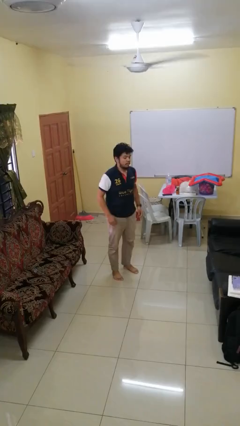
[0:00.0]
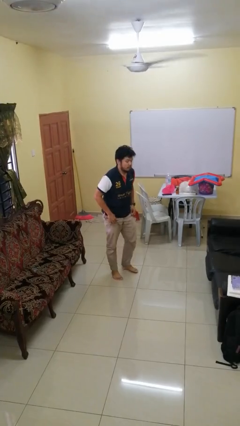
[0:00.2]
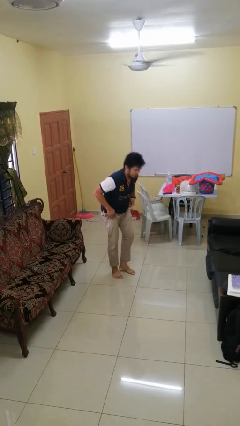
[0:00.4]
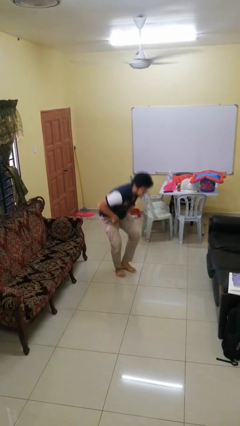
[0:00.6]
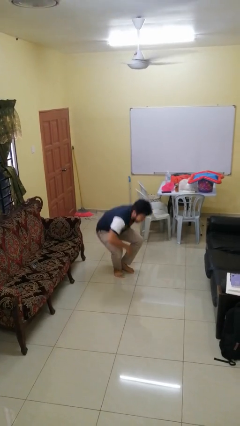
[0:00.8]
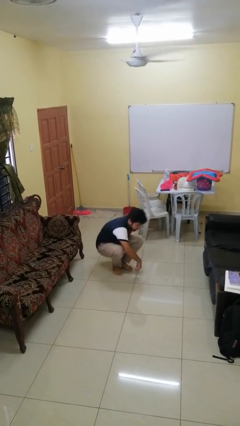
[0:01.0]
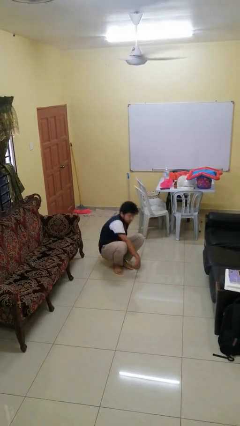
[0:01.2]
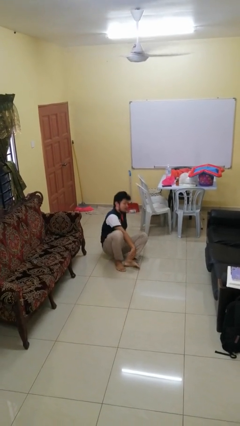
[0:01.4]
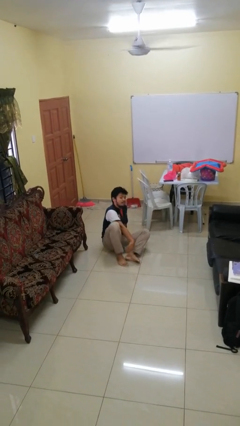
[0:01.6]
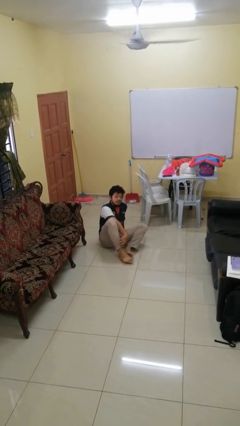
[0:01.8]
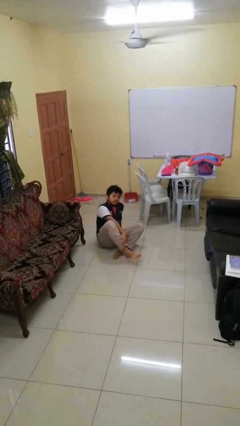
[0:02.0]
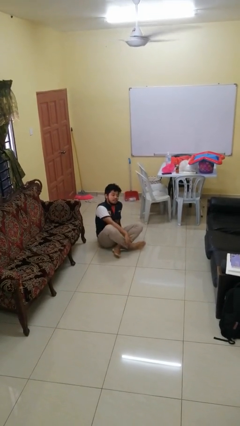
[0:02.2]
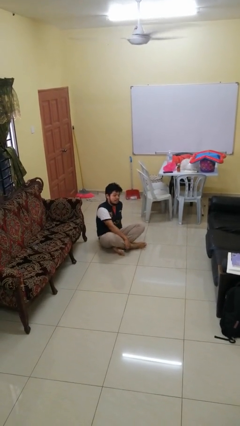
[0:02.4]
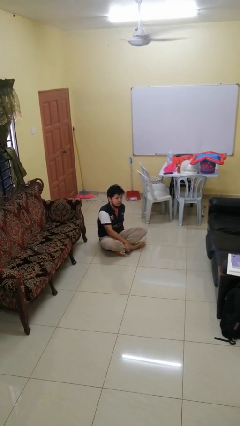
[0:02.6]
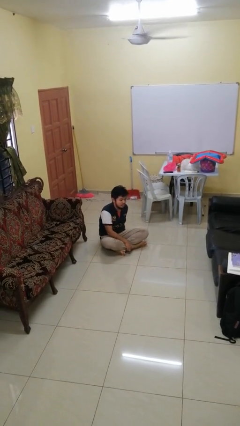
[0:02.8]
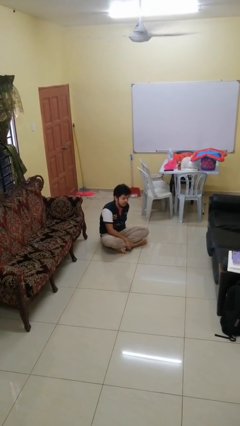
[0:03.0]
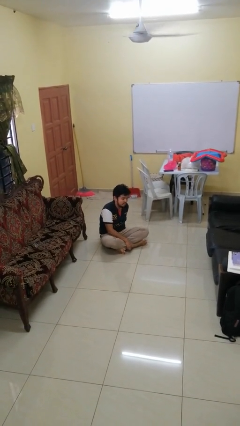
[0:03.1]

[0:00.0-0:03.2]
person sits crisscross

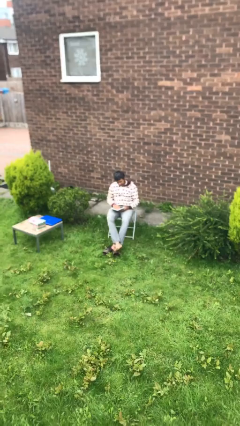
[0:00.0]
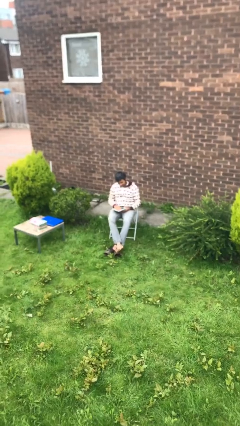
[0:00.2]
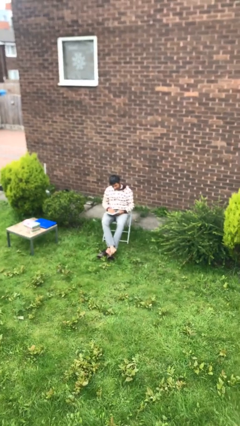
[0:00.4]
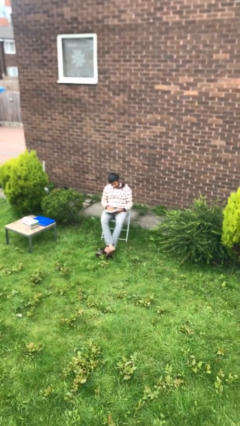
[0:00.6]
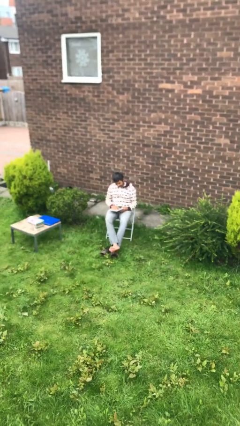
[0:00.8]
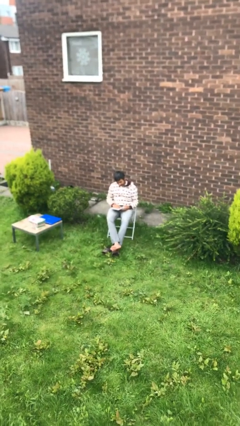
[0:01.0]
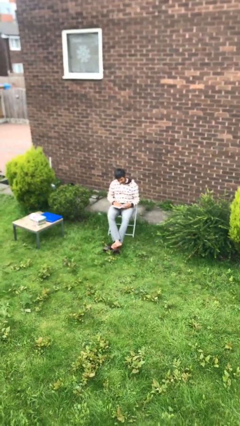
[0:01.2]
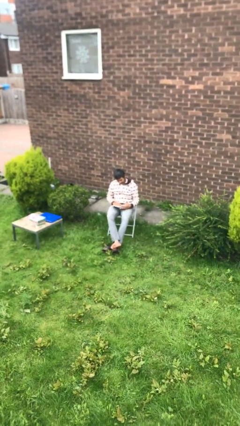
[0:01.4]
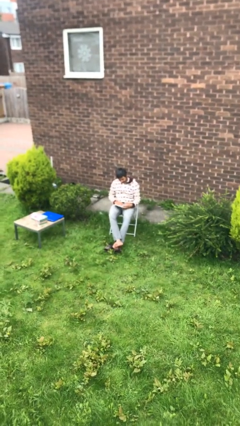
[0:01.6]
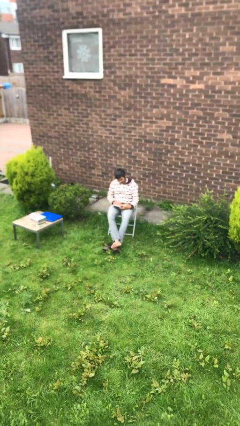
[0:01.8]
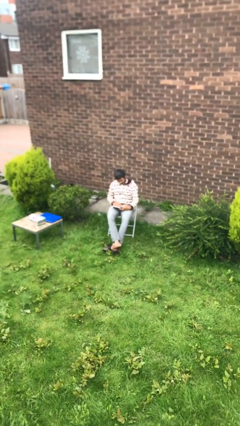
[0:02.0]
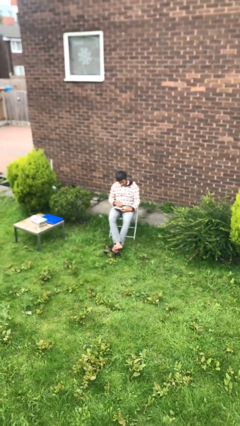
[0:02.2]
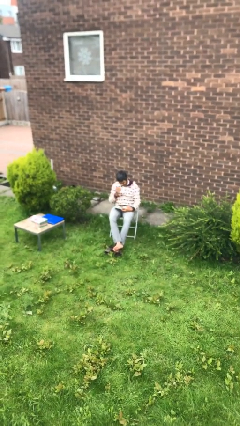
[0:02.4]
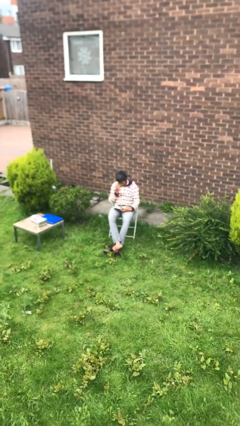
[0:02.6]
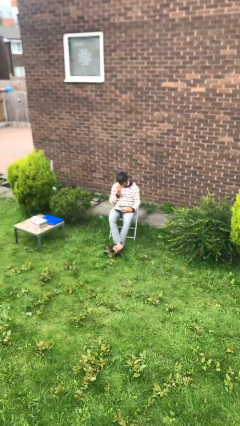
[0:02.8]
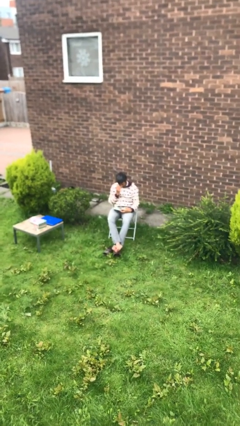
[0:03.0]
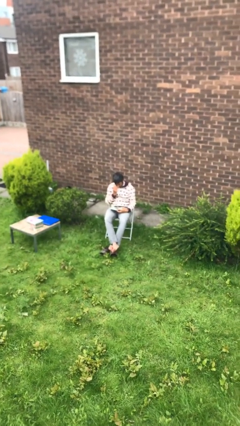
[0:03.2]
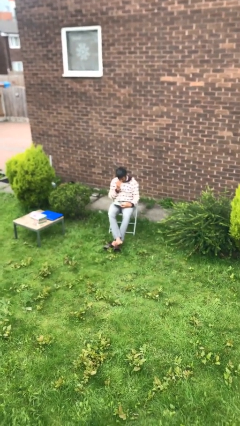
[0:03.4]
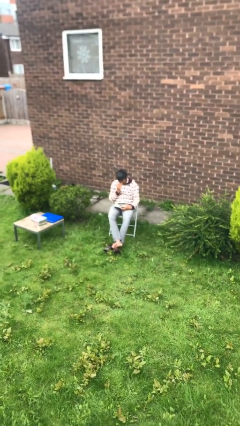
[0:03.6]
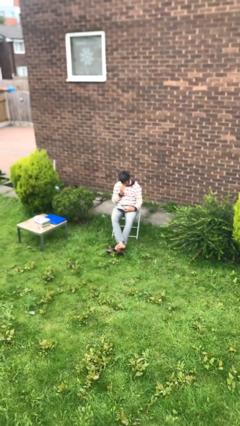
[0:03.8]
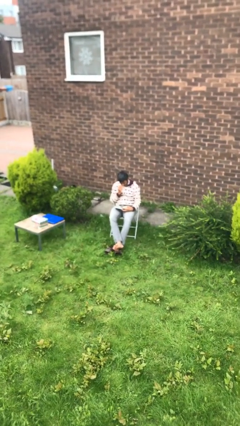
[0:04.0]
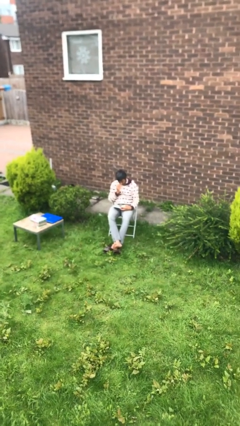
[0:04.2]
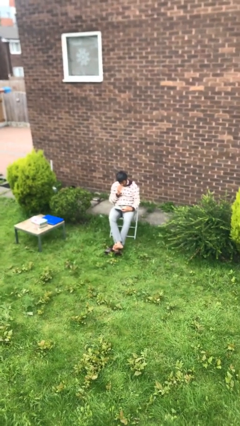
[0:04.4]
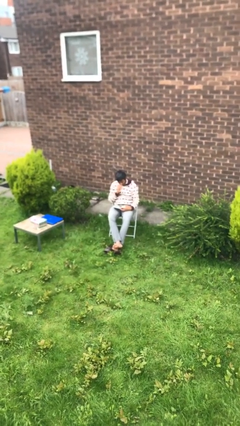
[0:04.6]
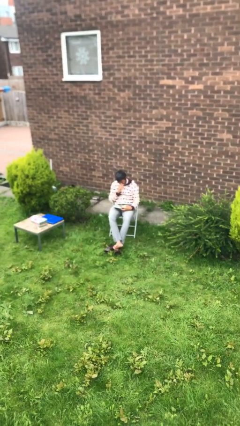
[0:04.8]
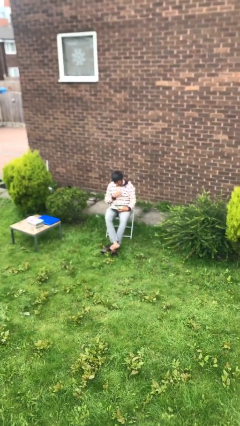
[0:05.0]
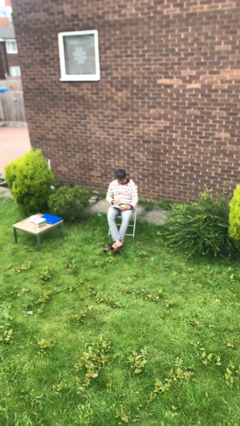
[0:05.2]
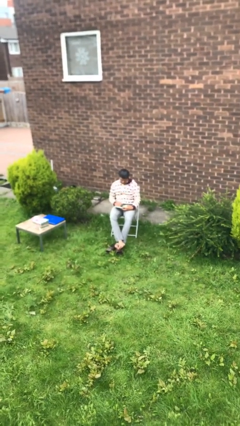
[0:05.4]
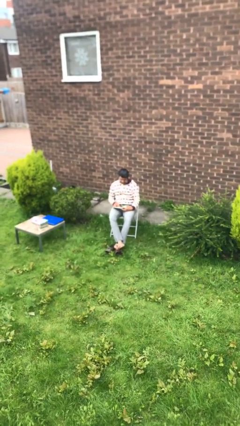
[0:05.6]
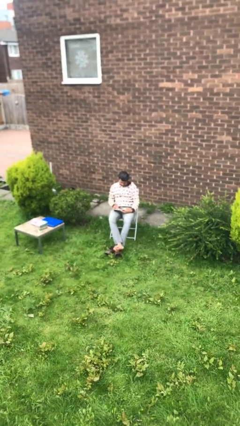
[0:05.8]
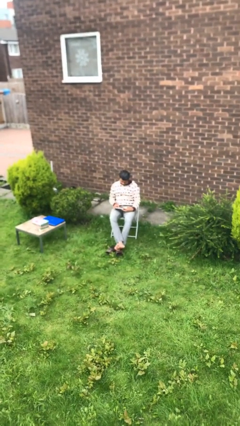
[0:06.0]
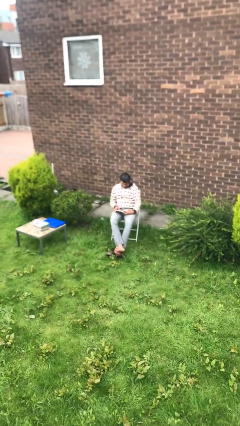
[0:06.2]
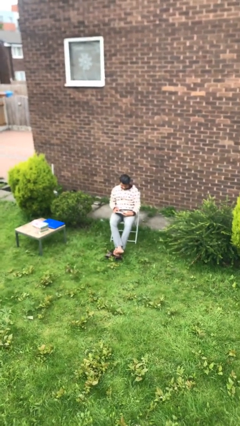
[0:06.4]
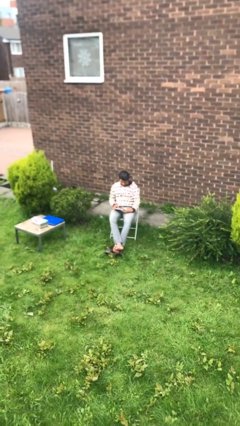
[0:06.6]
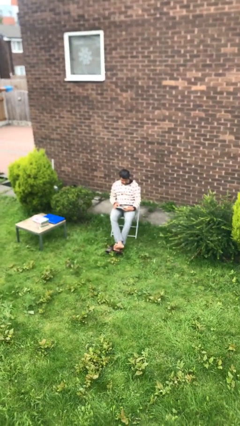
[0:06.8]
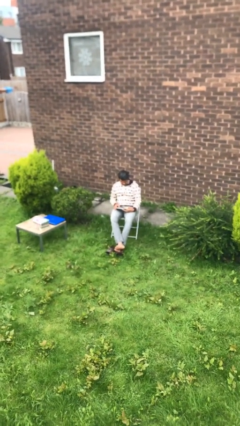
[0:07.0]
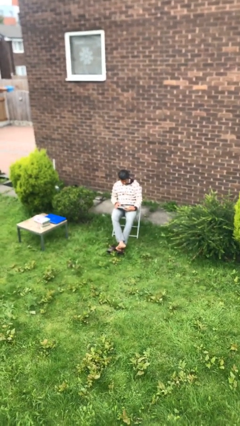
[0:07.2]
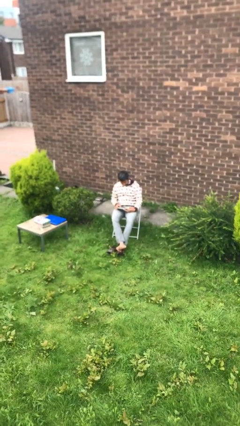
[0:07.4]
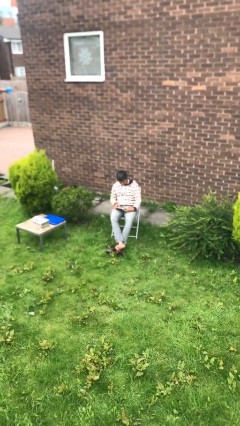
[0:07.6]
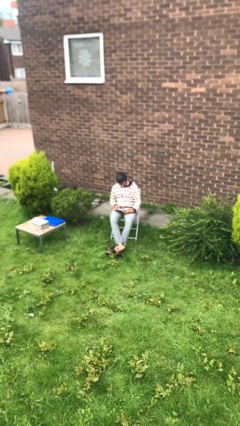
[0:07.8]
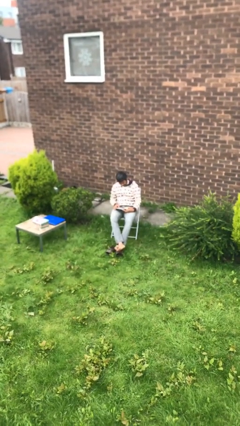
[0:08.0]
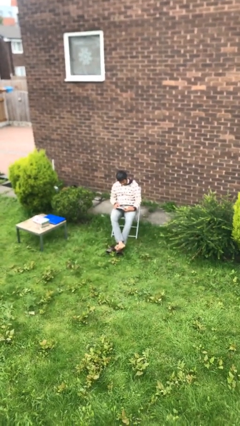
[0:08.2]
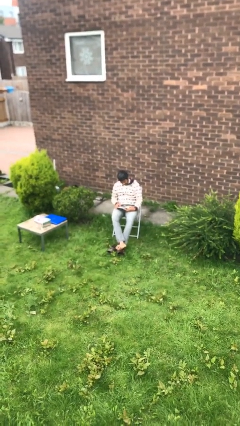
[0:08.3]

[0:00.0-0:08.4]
person reads document

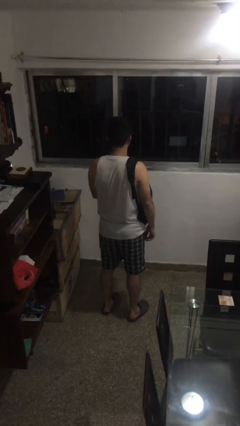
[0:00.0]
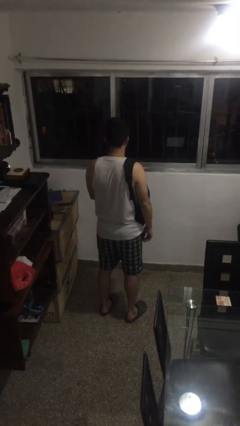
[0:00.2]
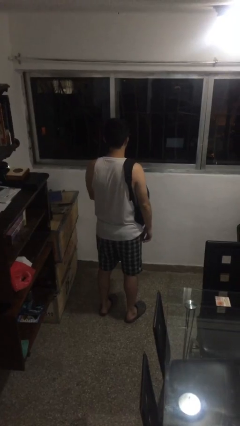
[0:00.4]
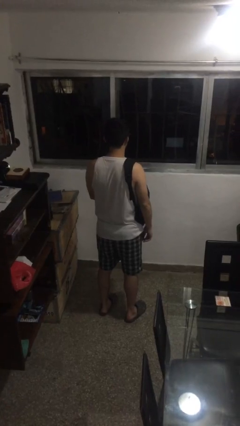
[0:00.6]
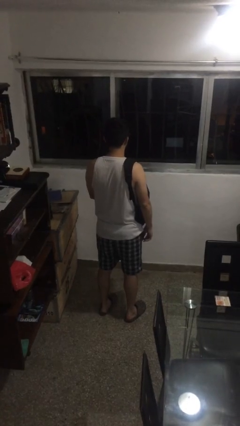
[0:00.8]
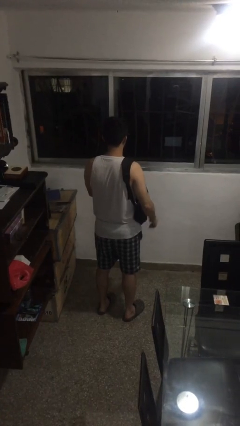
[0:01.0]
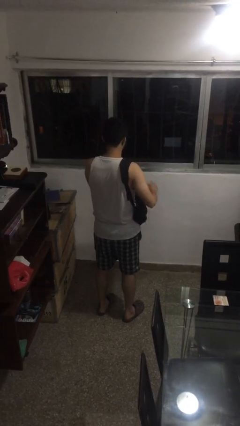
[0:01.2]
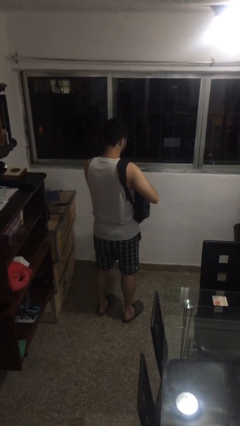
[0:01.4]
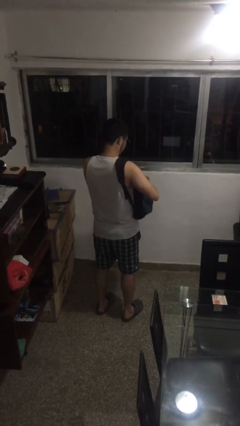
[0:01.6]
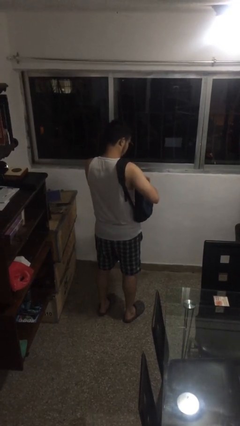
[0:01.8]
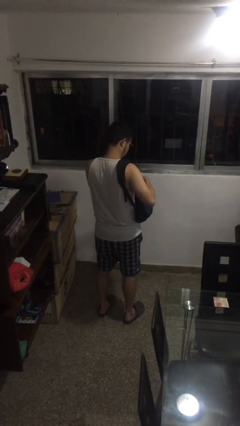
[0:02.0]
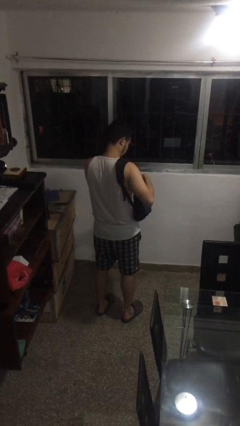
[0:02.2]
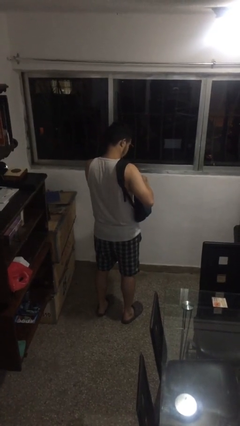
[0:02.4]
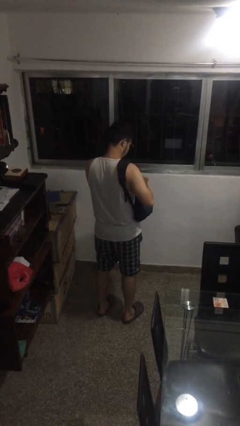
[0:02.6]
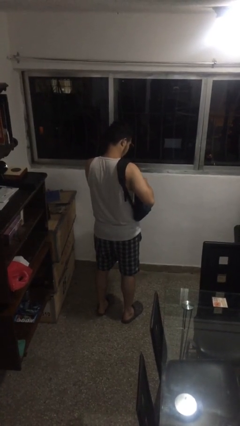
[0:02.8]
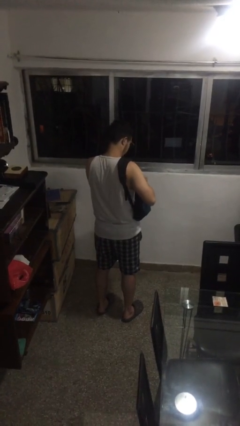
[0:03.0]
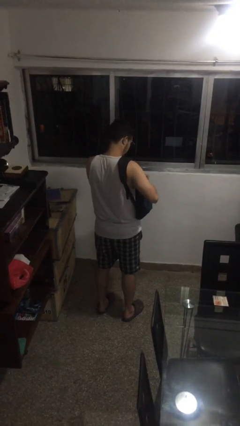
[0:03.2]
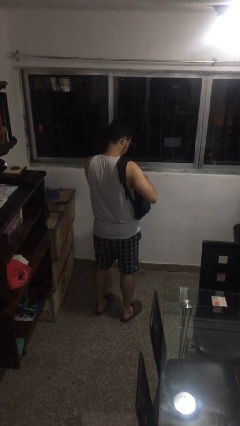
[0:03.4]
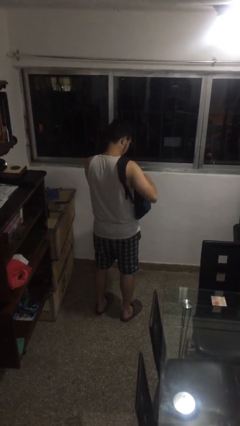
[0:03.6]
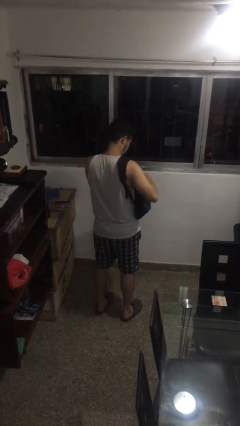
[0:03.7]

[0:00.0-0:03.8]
person searches in backpack

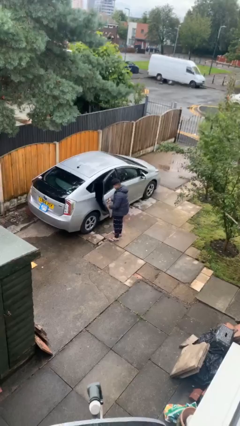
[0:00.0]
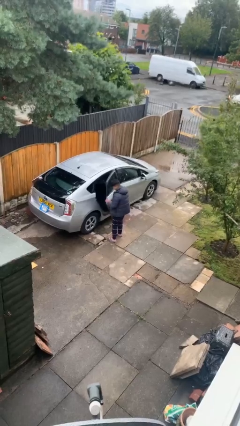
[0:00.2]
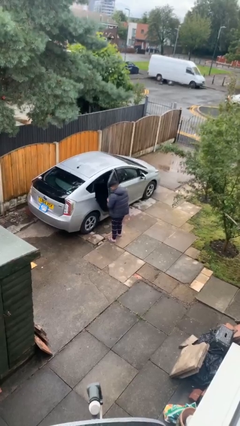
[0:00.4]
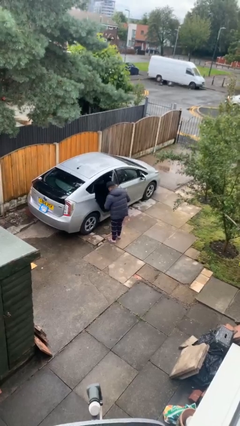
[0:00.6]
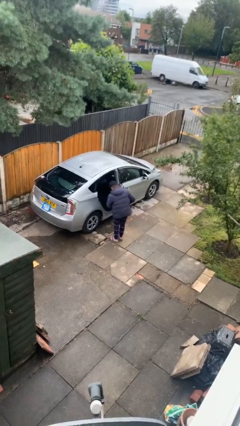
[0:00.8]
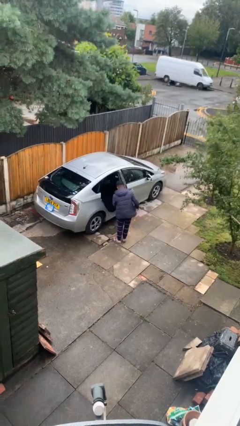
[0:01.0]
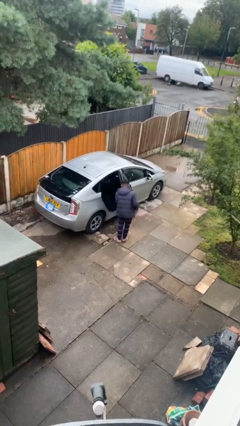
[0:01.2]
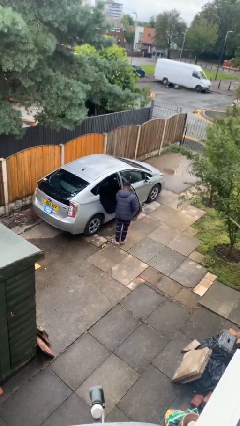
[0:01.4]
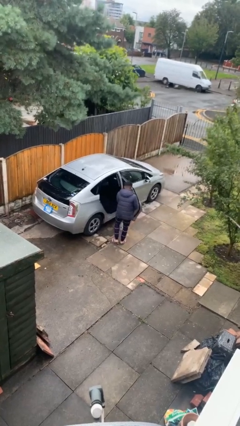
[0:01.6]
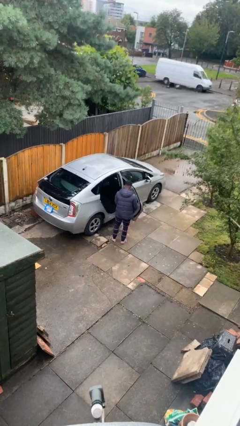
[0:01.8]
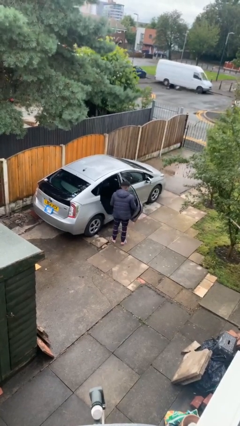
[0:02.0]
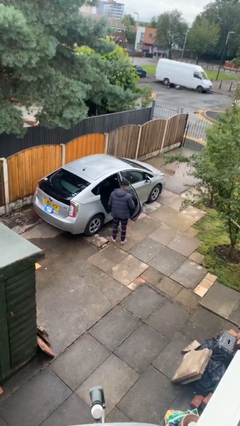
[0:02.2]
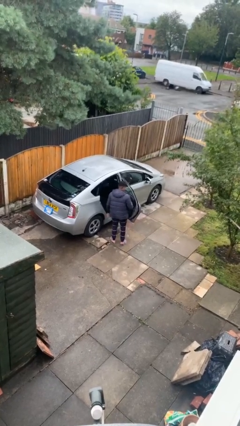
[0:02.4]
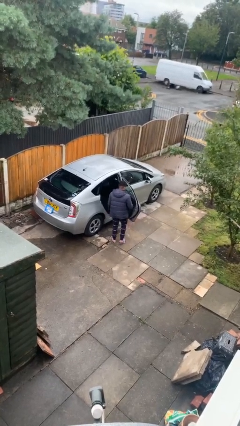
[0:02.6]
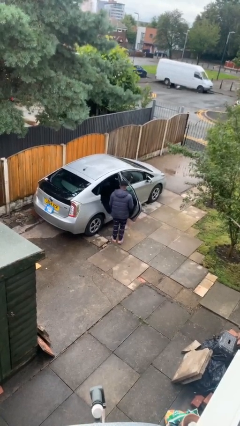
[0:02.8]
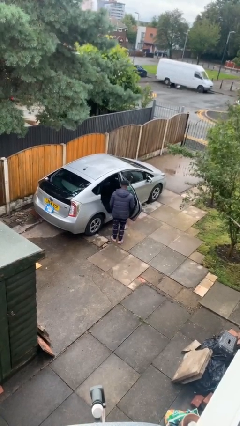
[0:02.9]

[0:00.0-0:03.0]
person opens car door
